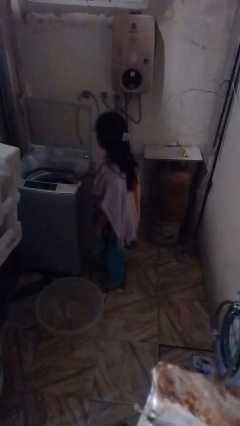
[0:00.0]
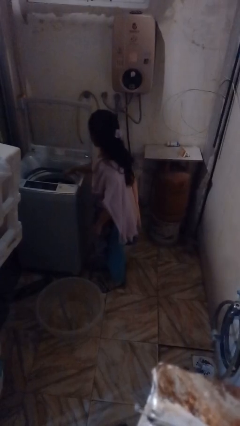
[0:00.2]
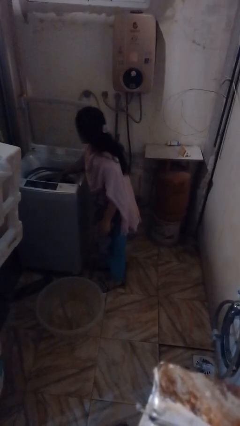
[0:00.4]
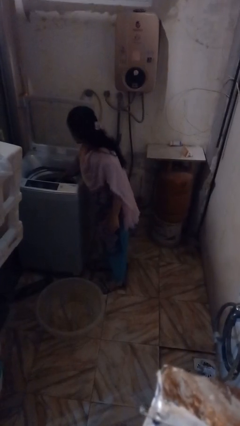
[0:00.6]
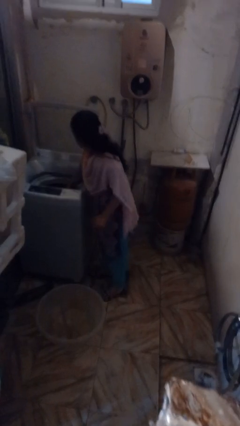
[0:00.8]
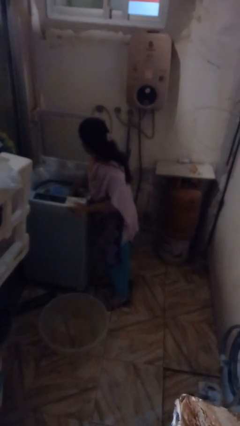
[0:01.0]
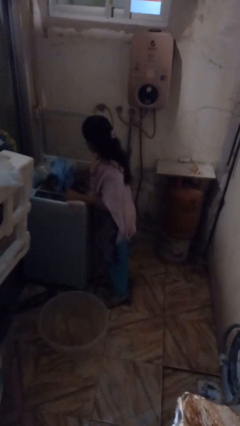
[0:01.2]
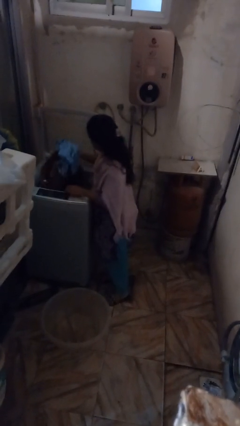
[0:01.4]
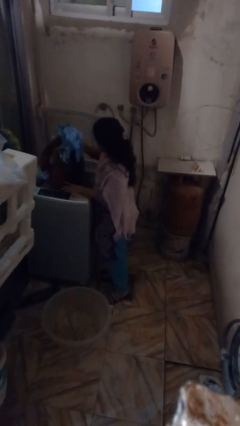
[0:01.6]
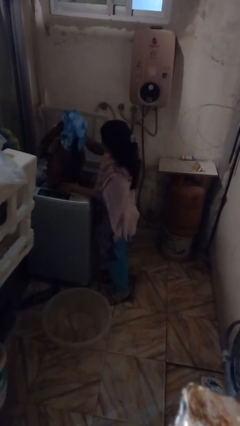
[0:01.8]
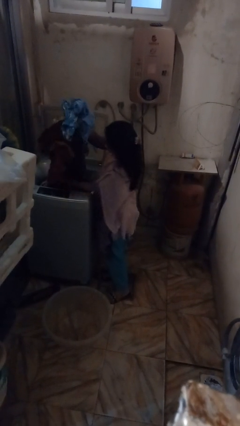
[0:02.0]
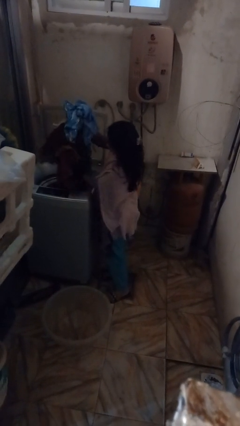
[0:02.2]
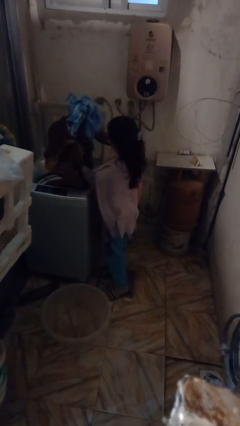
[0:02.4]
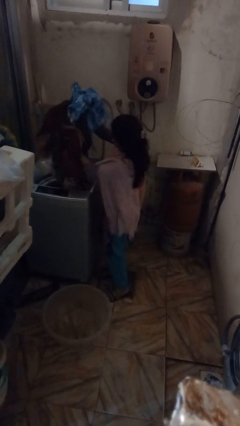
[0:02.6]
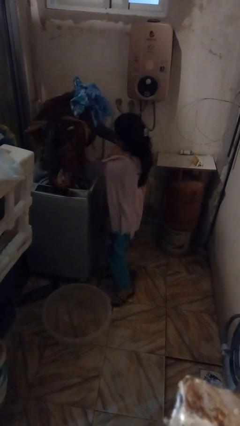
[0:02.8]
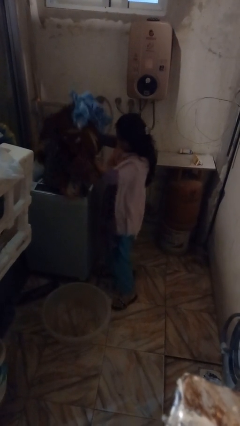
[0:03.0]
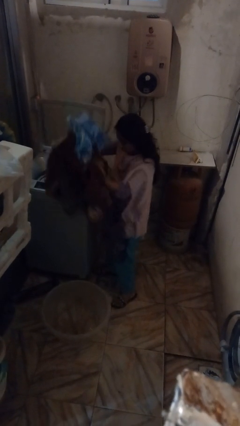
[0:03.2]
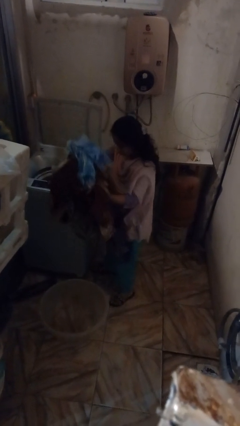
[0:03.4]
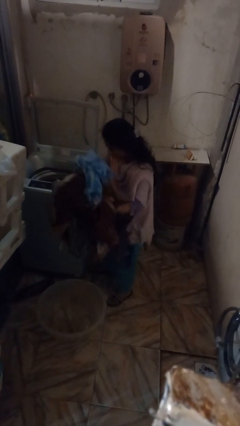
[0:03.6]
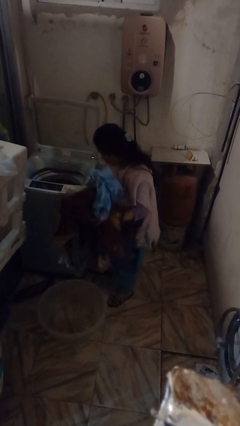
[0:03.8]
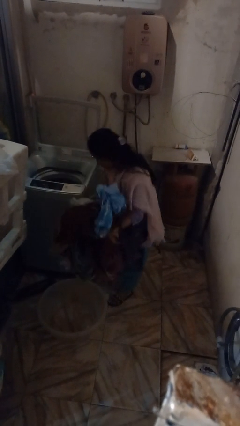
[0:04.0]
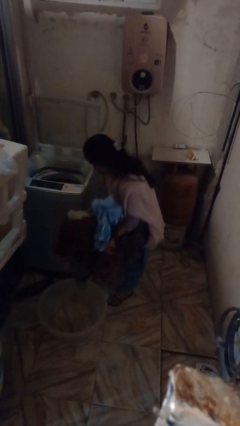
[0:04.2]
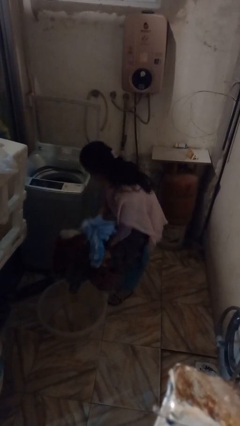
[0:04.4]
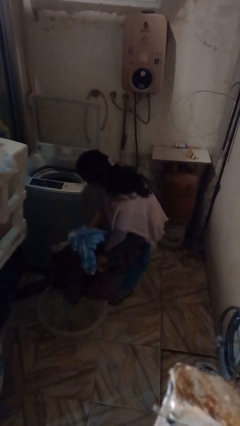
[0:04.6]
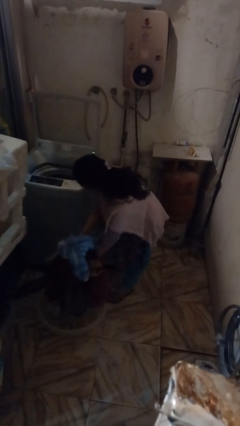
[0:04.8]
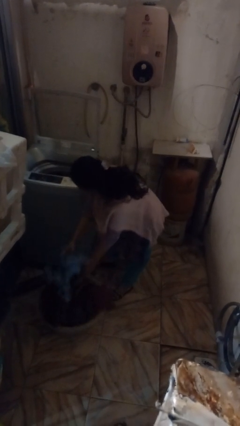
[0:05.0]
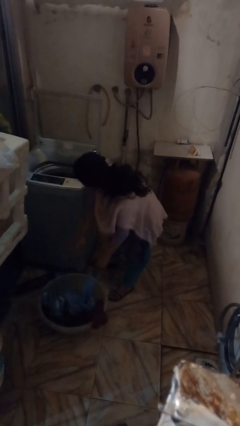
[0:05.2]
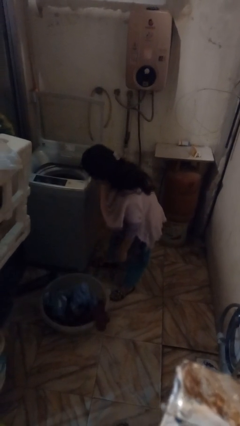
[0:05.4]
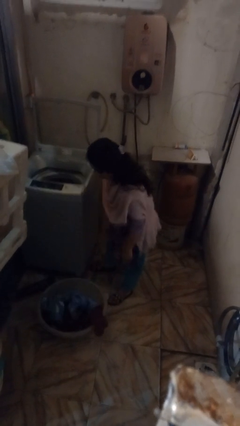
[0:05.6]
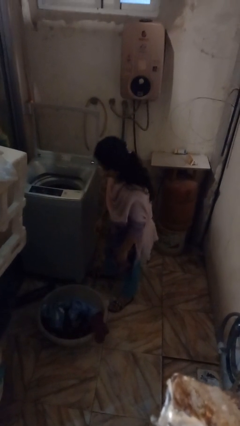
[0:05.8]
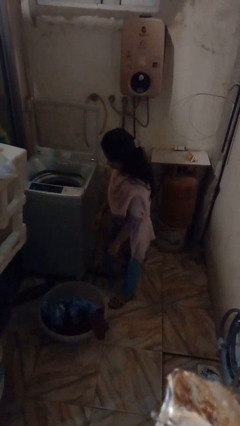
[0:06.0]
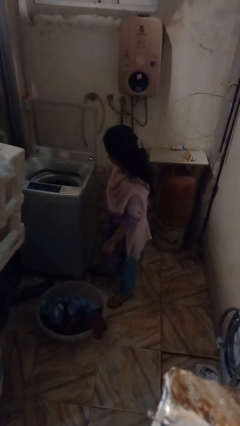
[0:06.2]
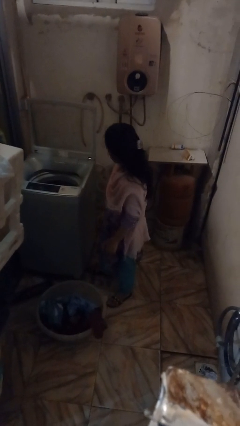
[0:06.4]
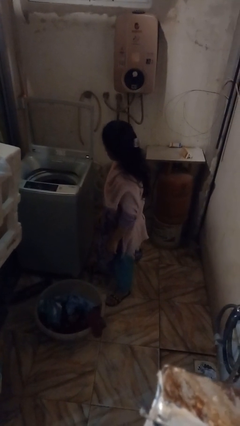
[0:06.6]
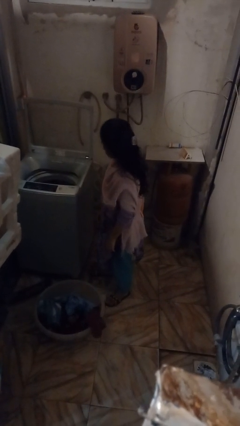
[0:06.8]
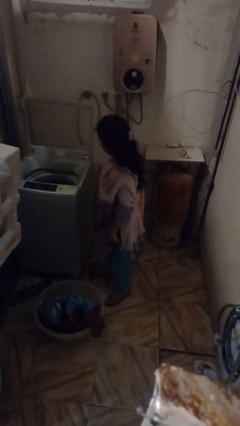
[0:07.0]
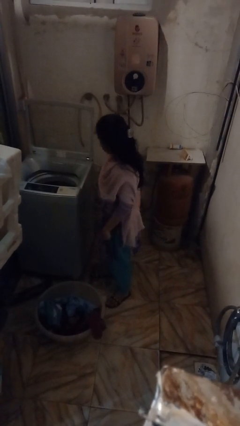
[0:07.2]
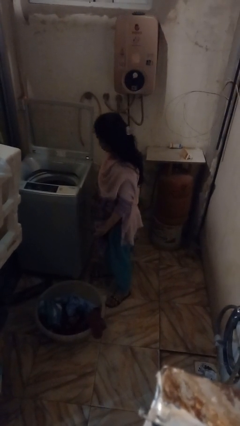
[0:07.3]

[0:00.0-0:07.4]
person unloads clotheswasher

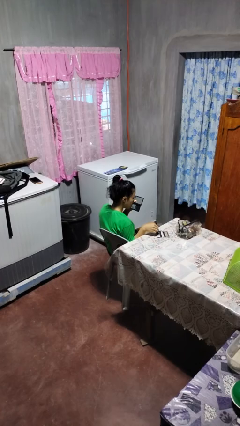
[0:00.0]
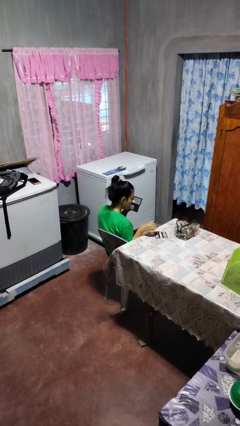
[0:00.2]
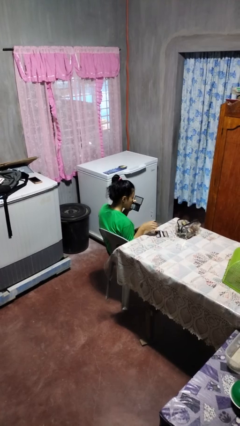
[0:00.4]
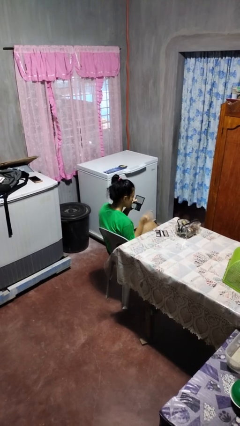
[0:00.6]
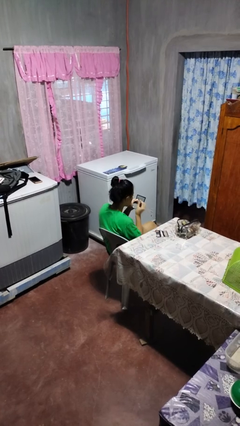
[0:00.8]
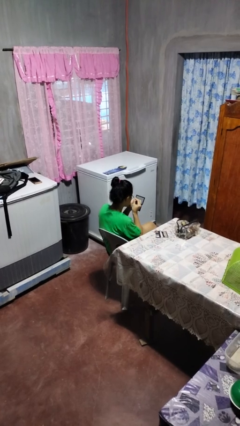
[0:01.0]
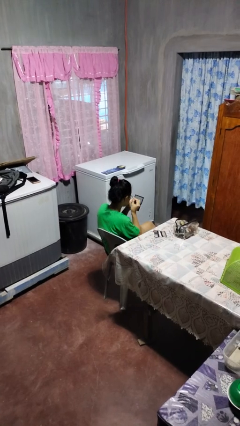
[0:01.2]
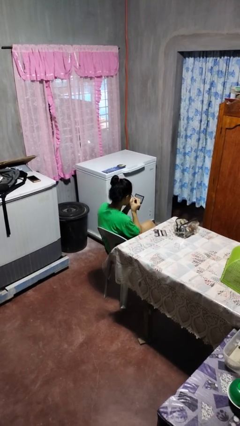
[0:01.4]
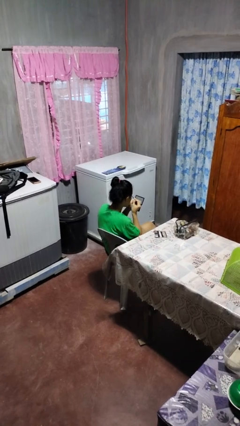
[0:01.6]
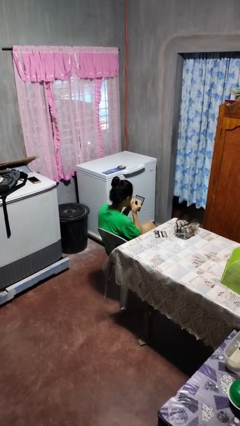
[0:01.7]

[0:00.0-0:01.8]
person applies eye makeup

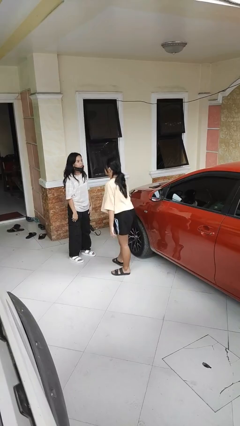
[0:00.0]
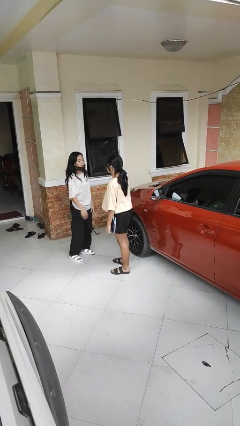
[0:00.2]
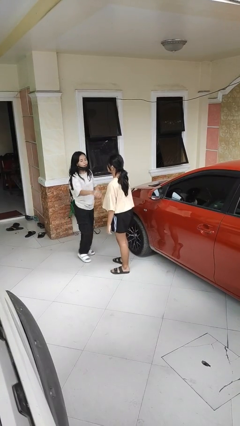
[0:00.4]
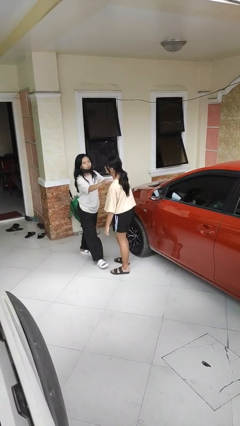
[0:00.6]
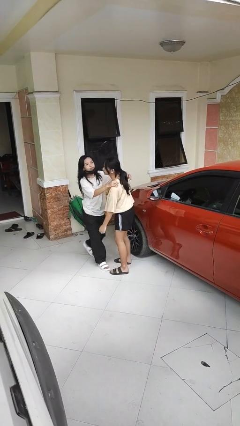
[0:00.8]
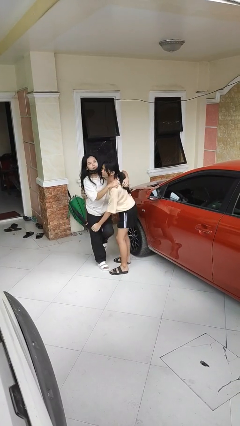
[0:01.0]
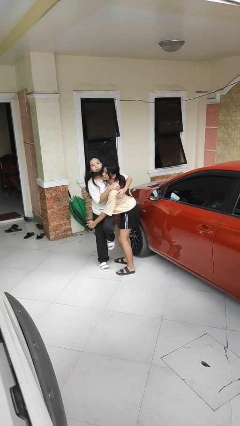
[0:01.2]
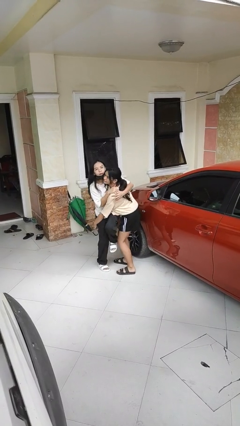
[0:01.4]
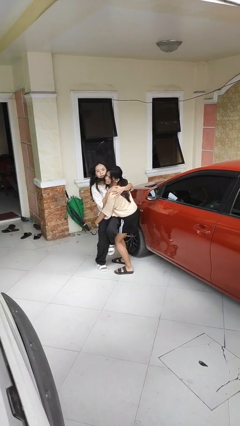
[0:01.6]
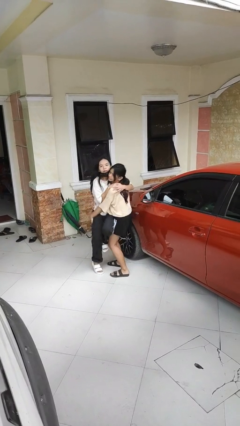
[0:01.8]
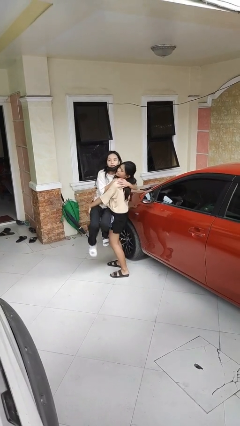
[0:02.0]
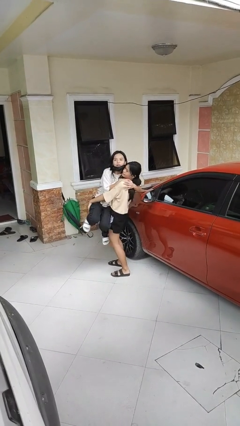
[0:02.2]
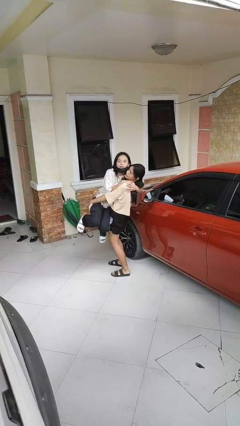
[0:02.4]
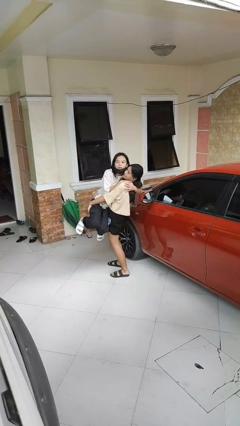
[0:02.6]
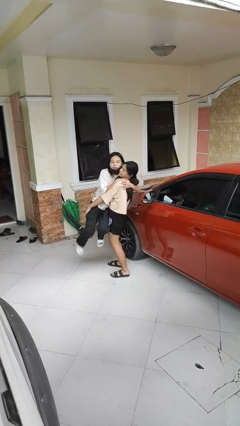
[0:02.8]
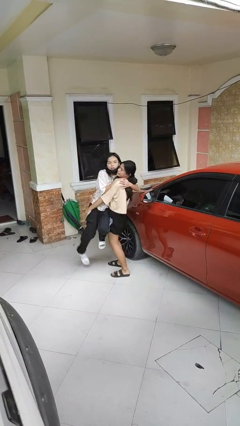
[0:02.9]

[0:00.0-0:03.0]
person picks up person

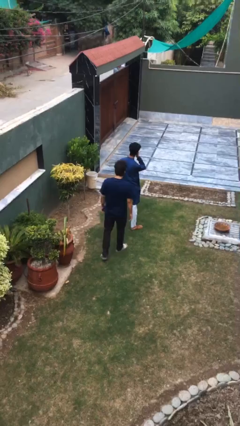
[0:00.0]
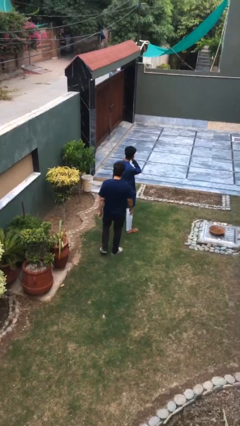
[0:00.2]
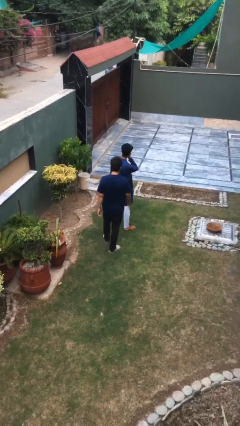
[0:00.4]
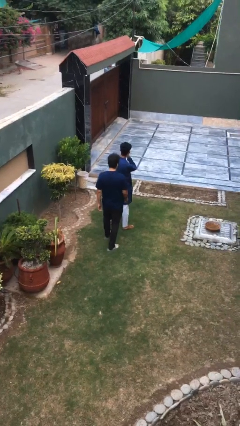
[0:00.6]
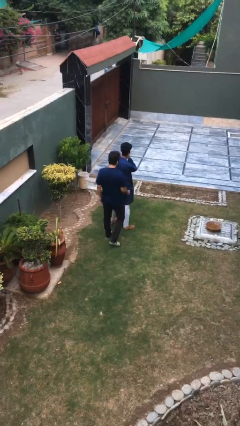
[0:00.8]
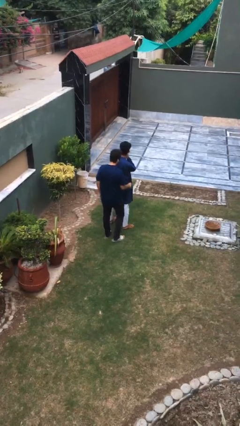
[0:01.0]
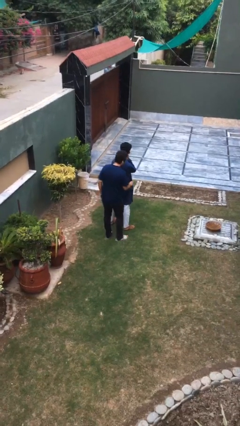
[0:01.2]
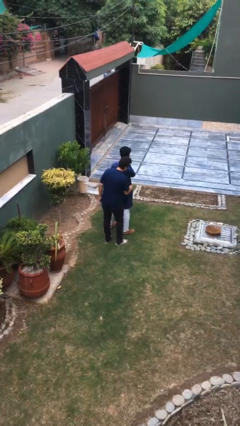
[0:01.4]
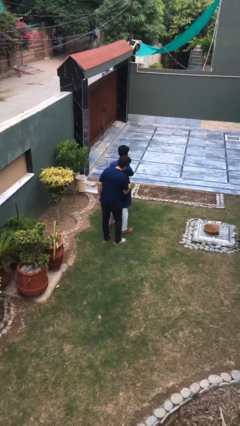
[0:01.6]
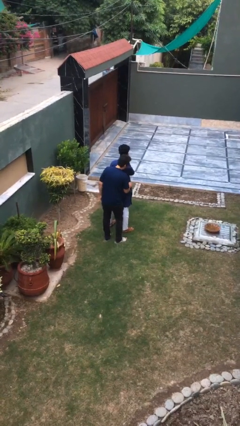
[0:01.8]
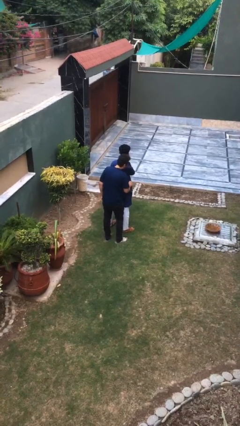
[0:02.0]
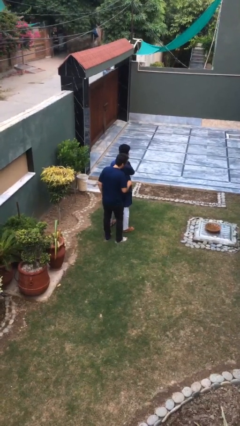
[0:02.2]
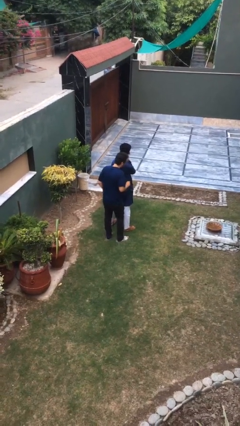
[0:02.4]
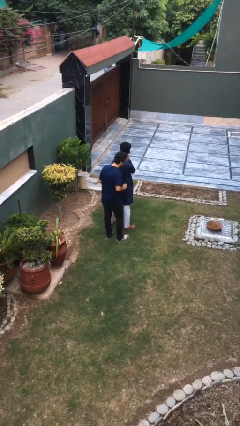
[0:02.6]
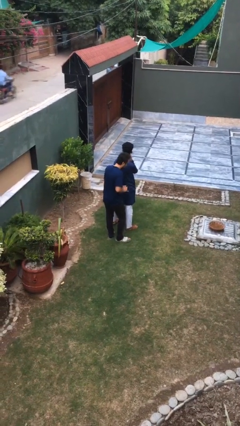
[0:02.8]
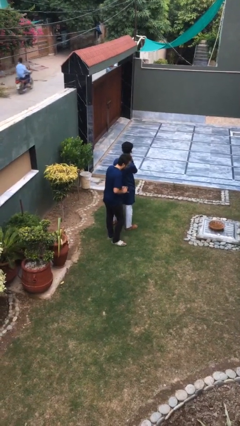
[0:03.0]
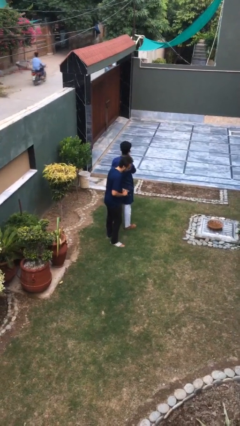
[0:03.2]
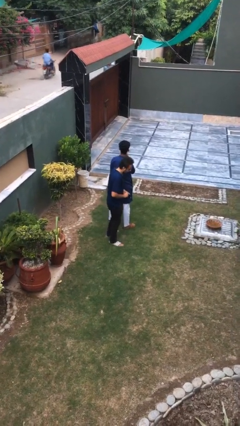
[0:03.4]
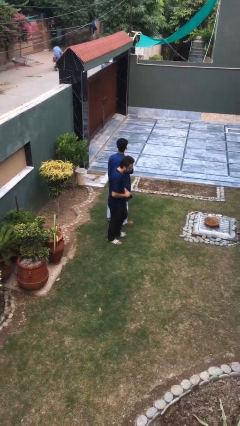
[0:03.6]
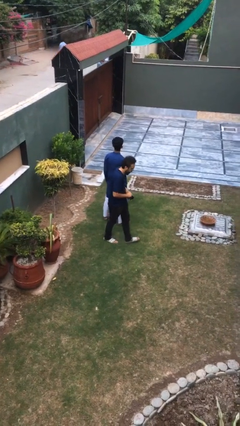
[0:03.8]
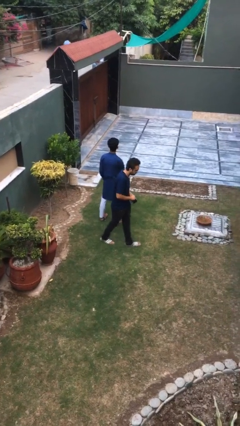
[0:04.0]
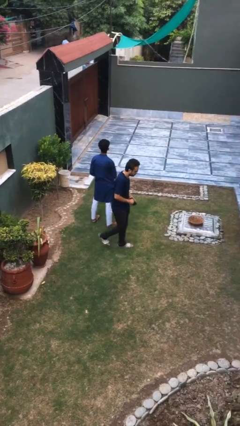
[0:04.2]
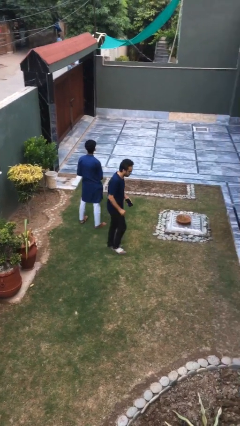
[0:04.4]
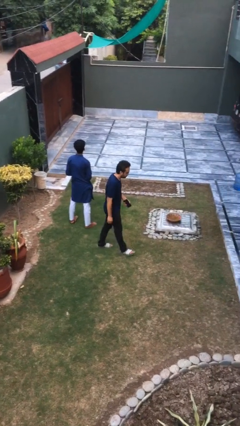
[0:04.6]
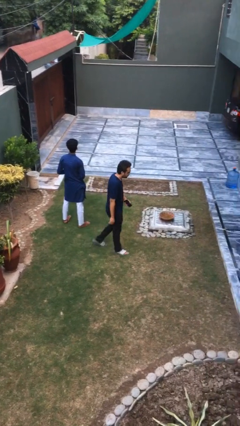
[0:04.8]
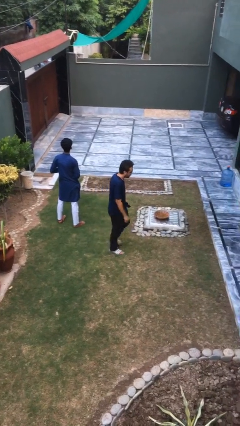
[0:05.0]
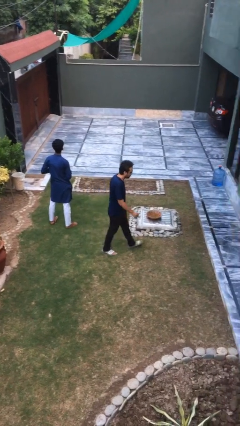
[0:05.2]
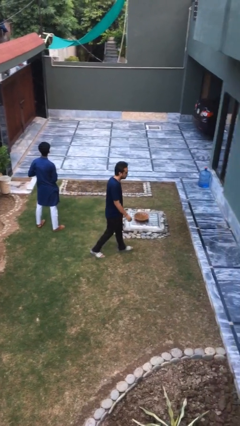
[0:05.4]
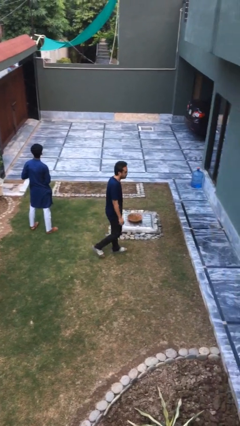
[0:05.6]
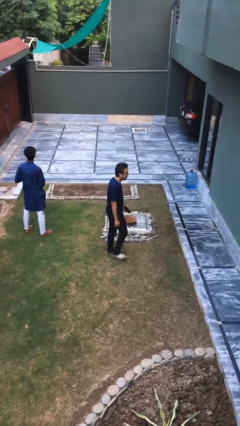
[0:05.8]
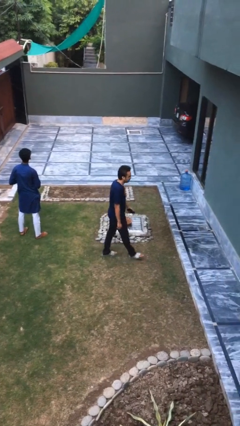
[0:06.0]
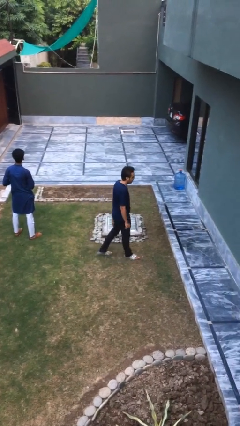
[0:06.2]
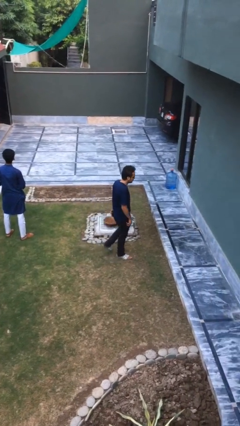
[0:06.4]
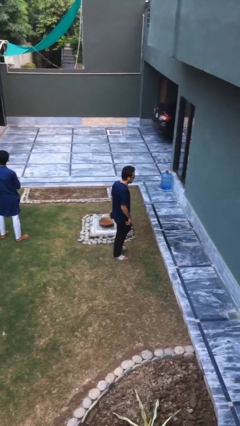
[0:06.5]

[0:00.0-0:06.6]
person steals object from person
